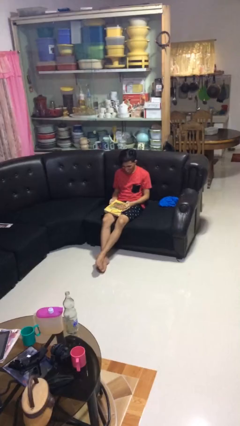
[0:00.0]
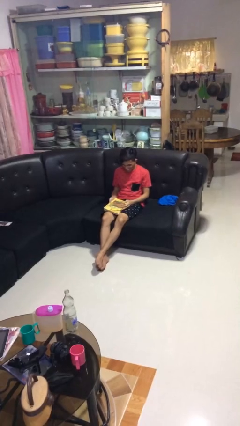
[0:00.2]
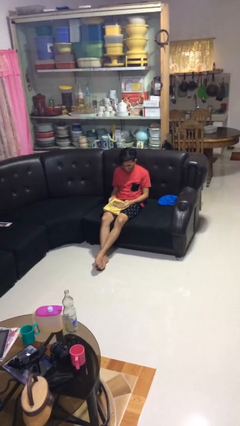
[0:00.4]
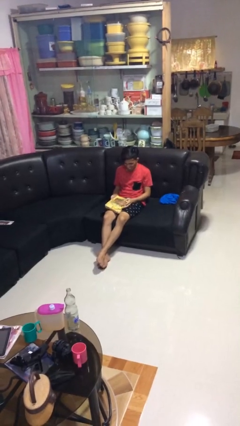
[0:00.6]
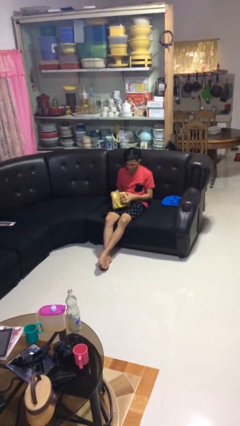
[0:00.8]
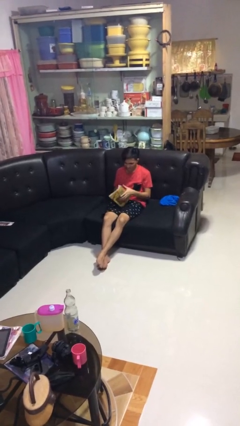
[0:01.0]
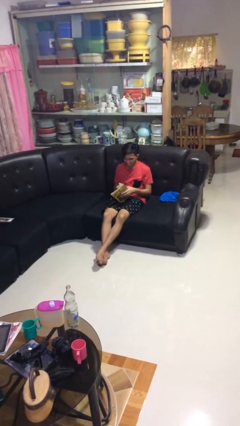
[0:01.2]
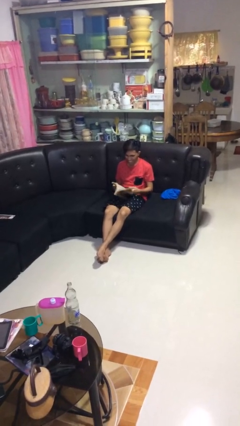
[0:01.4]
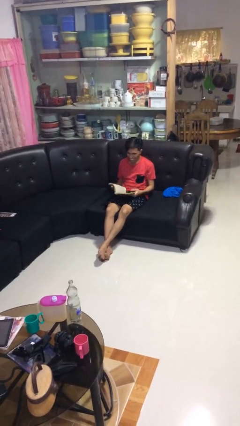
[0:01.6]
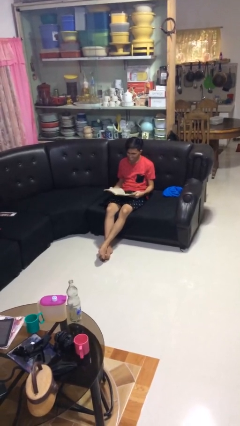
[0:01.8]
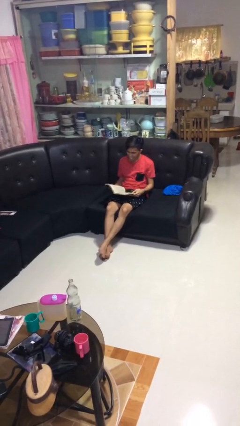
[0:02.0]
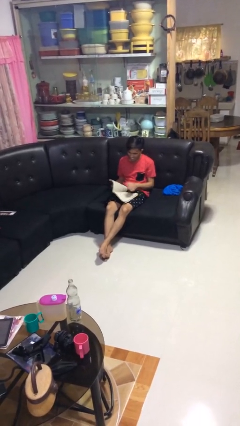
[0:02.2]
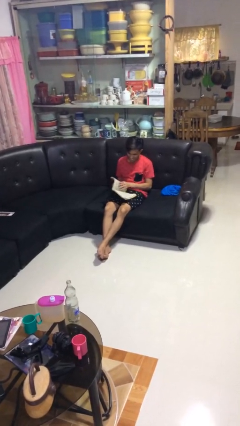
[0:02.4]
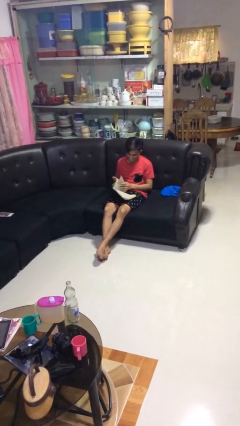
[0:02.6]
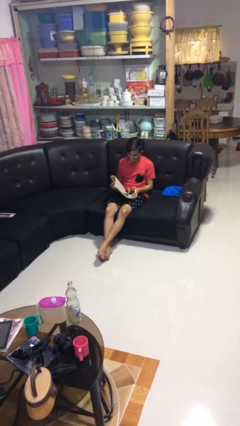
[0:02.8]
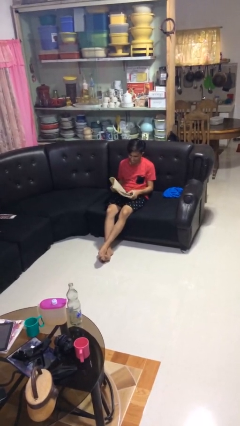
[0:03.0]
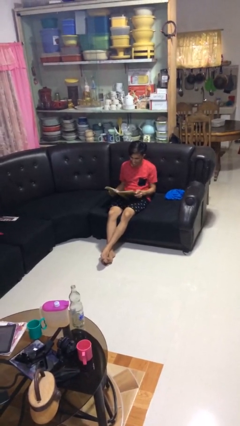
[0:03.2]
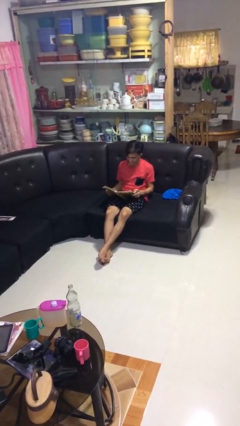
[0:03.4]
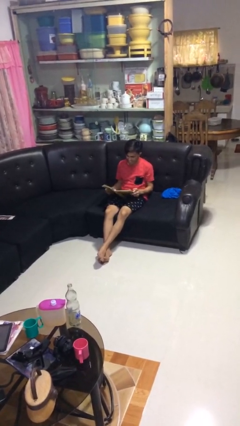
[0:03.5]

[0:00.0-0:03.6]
person reads book

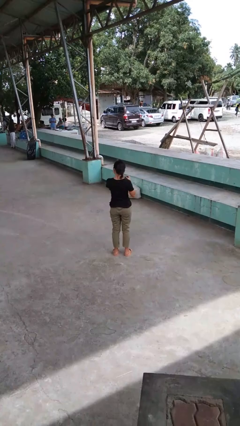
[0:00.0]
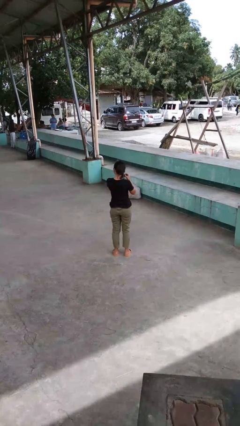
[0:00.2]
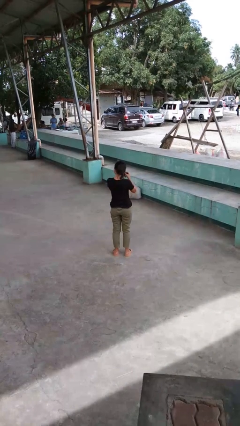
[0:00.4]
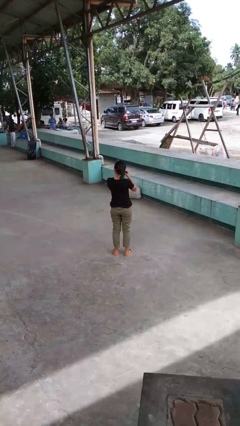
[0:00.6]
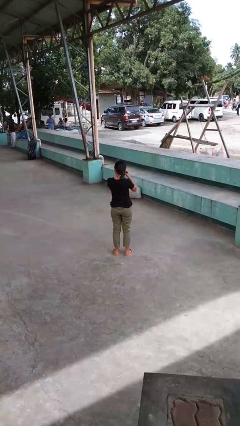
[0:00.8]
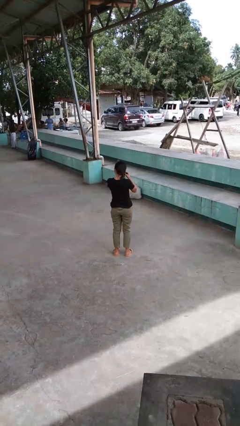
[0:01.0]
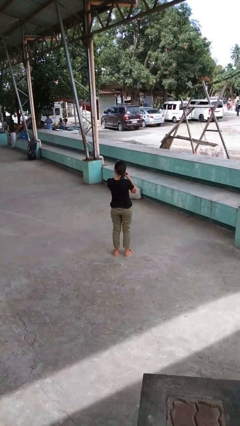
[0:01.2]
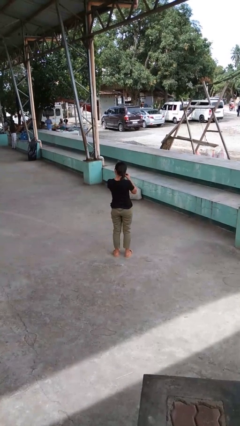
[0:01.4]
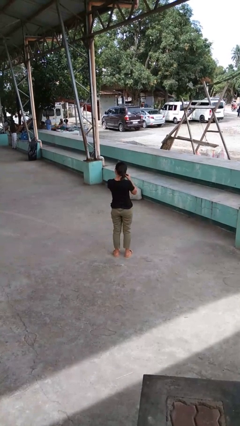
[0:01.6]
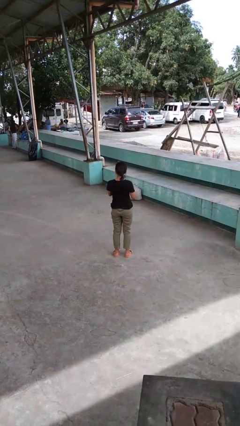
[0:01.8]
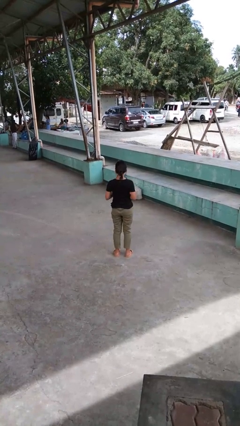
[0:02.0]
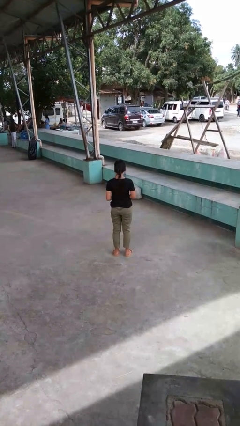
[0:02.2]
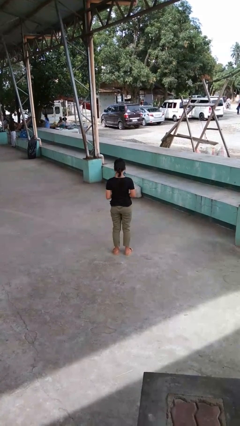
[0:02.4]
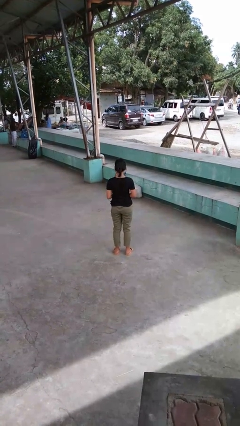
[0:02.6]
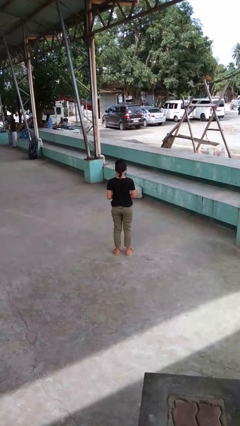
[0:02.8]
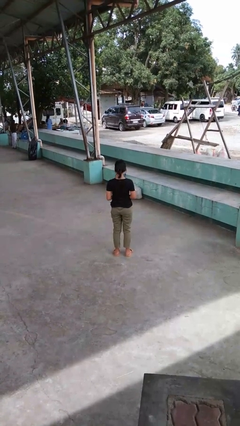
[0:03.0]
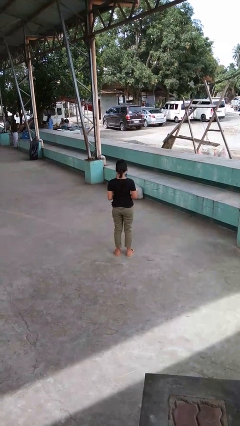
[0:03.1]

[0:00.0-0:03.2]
person puts on earrings

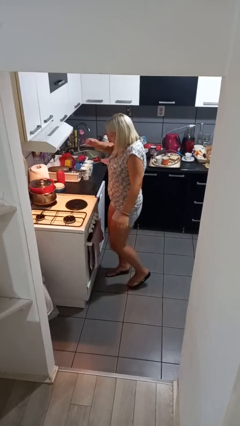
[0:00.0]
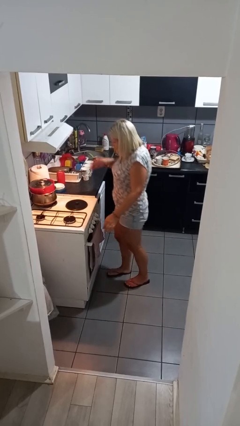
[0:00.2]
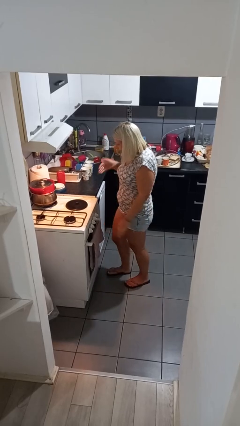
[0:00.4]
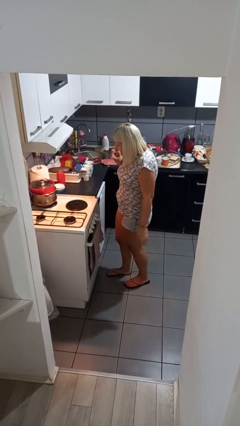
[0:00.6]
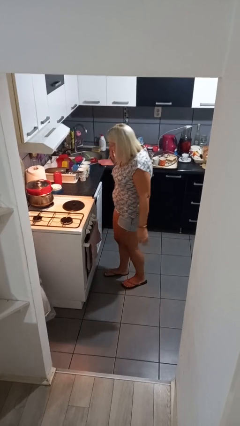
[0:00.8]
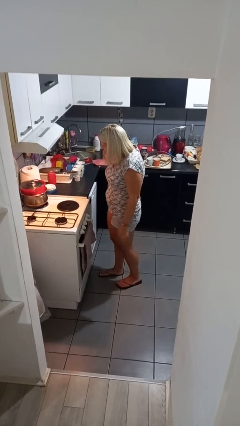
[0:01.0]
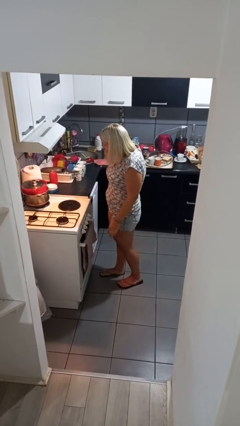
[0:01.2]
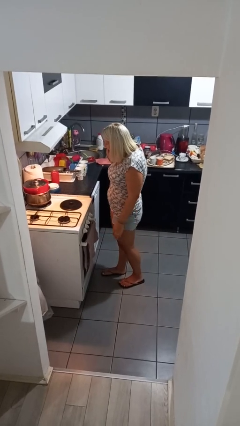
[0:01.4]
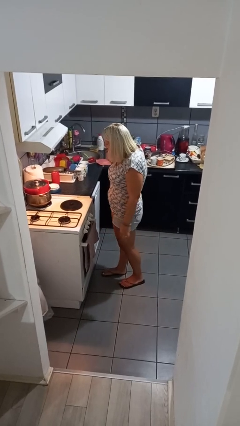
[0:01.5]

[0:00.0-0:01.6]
person burns hand

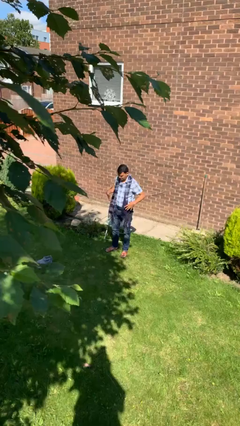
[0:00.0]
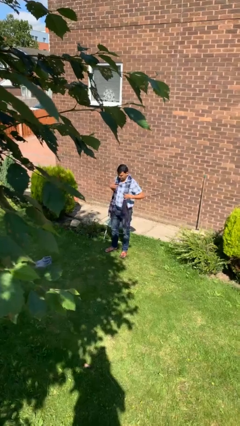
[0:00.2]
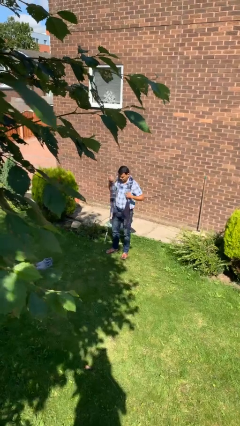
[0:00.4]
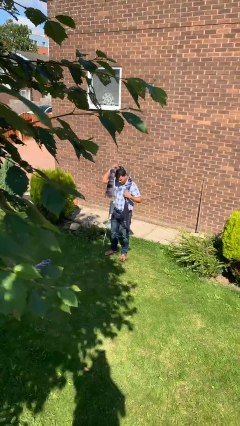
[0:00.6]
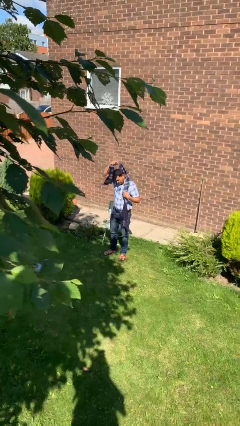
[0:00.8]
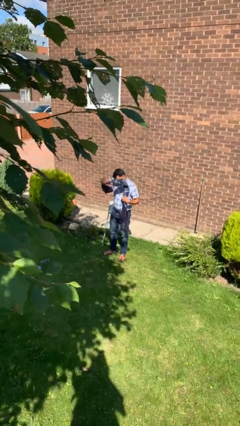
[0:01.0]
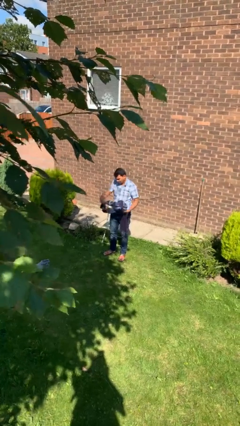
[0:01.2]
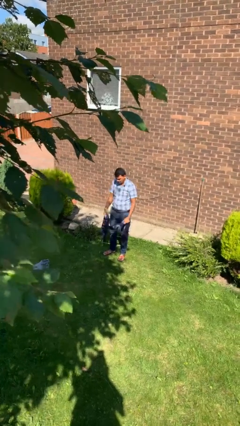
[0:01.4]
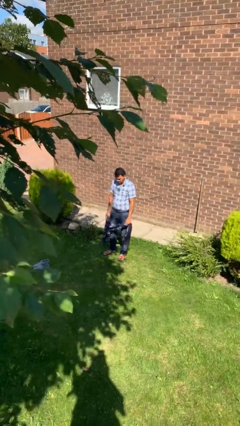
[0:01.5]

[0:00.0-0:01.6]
person takes off scarf

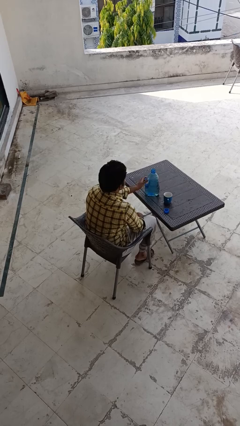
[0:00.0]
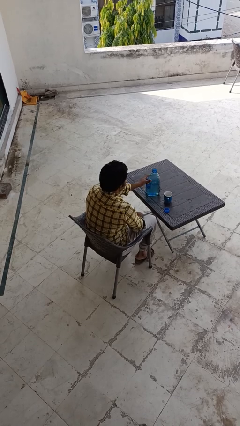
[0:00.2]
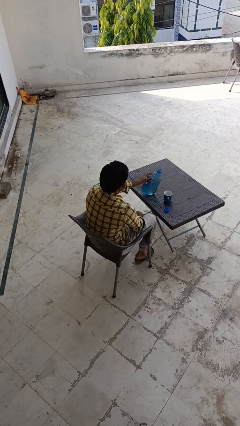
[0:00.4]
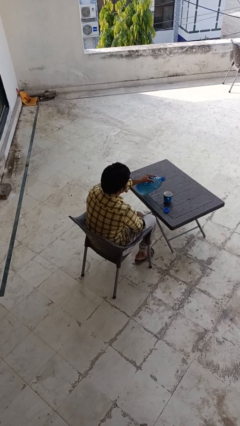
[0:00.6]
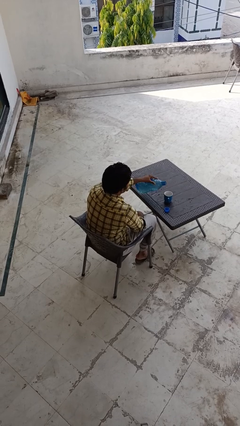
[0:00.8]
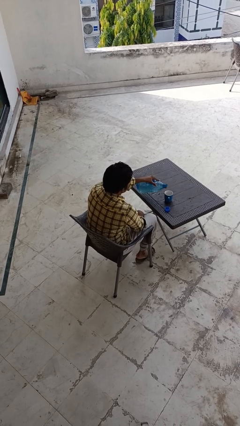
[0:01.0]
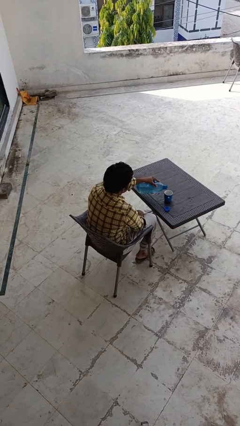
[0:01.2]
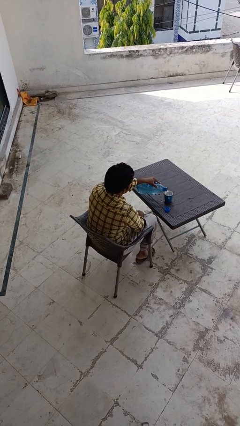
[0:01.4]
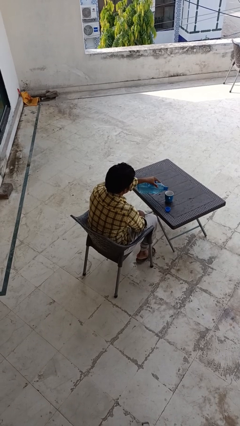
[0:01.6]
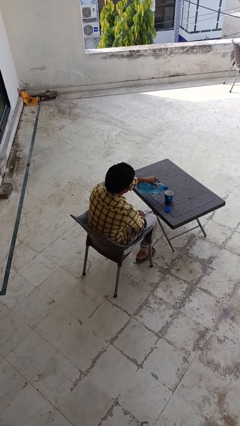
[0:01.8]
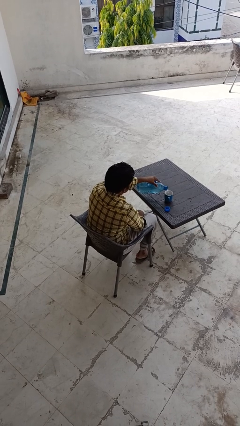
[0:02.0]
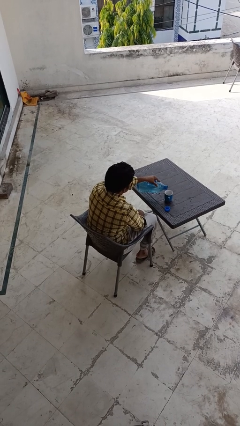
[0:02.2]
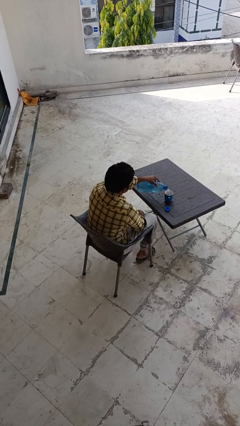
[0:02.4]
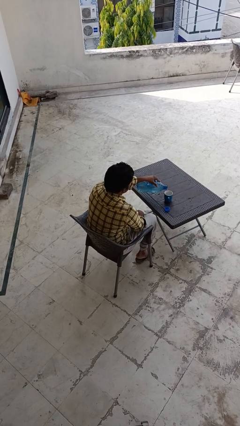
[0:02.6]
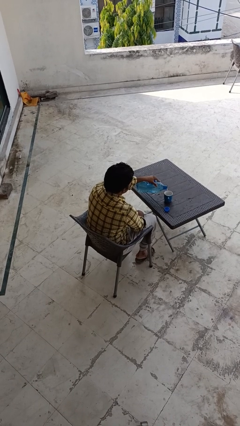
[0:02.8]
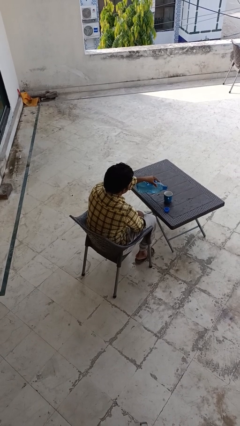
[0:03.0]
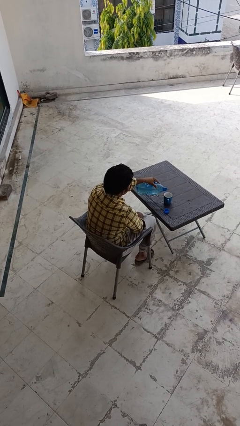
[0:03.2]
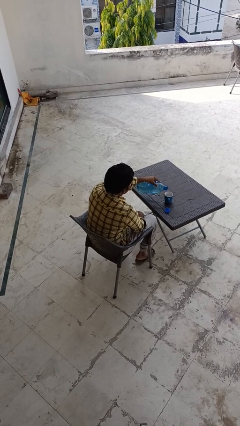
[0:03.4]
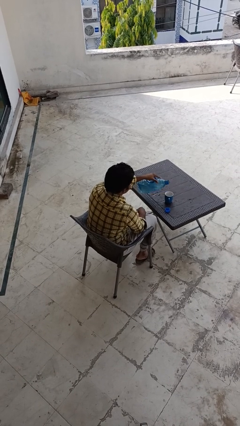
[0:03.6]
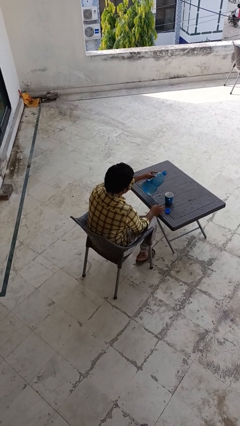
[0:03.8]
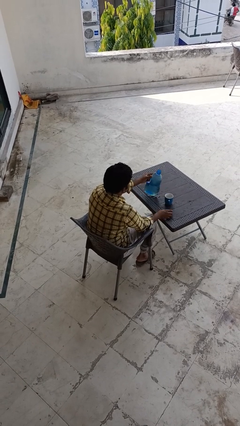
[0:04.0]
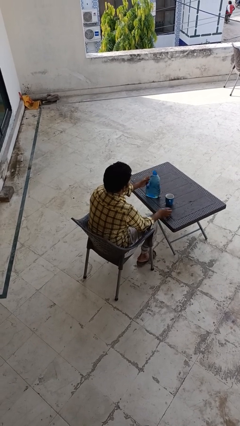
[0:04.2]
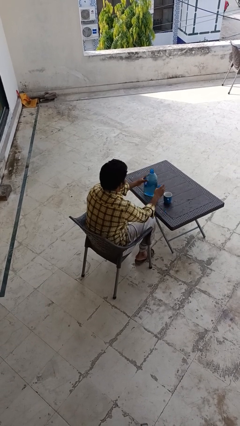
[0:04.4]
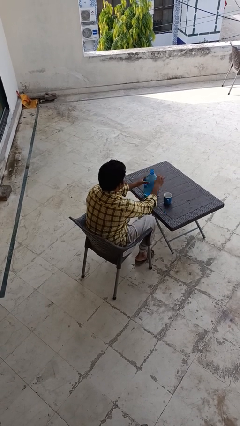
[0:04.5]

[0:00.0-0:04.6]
person pours liquid into cup

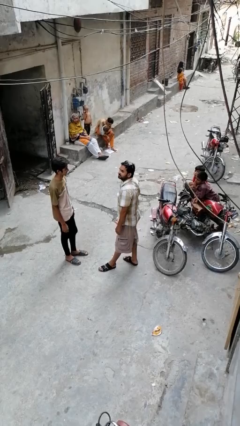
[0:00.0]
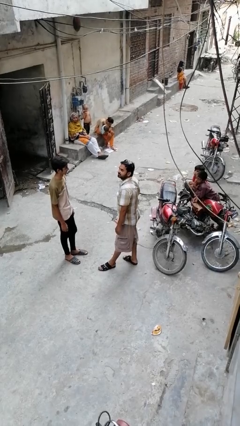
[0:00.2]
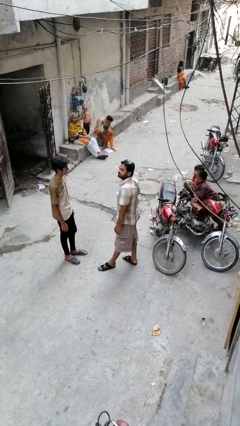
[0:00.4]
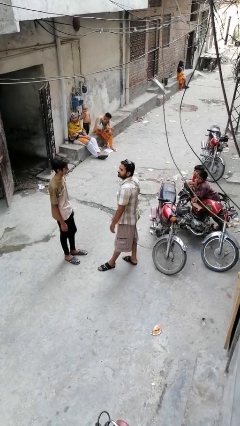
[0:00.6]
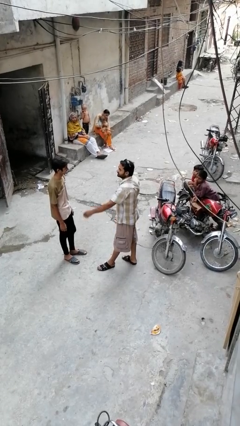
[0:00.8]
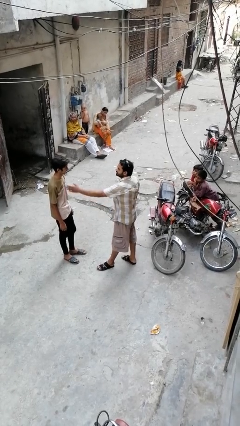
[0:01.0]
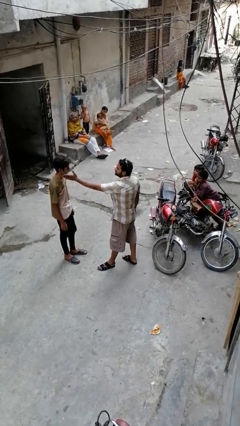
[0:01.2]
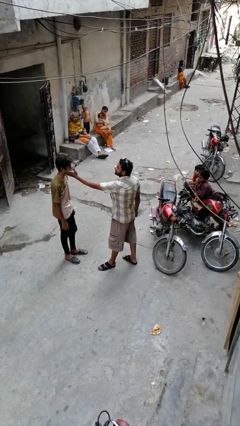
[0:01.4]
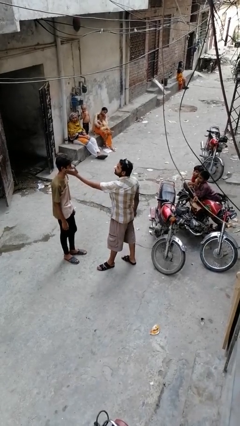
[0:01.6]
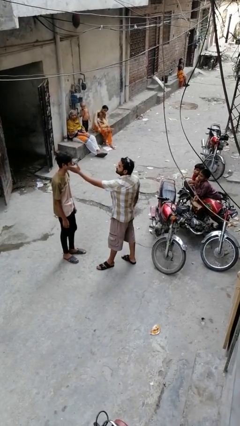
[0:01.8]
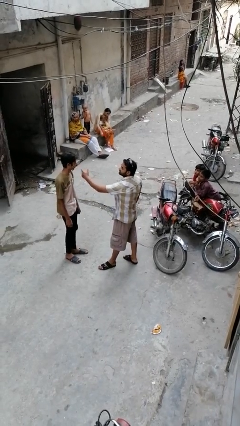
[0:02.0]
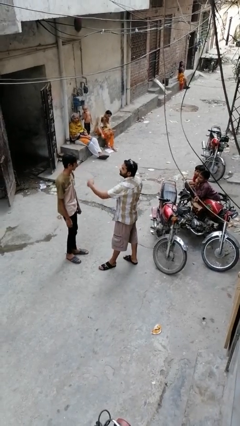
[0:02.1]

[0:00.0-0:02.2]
person touches face of person
